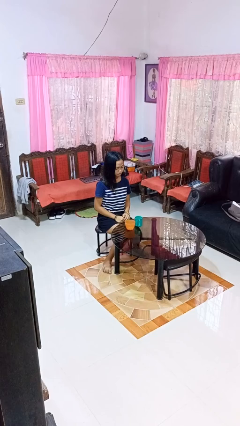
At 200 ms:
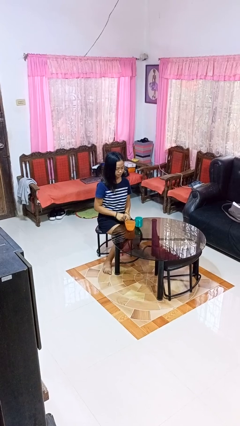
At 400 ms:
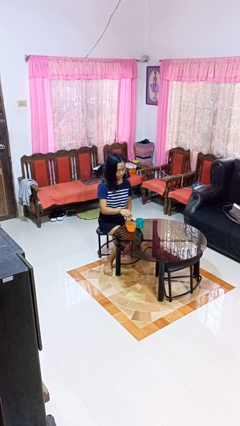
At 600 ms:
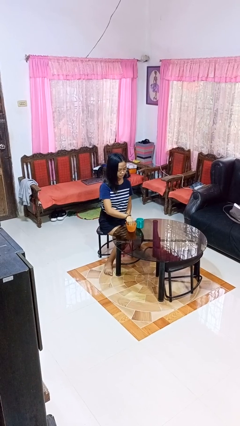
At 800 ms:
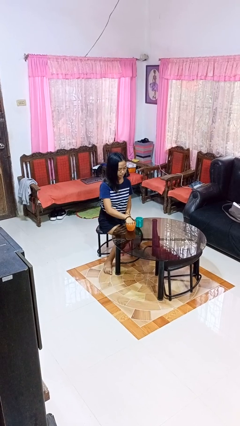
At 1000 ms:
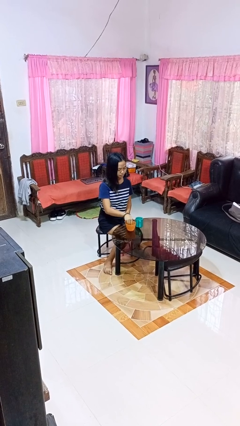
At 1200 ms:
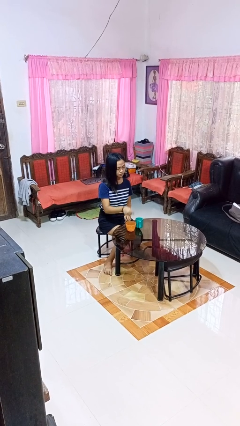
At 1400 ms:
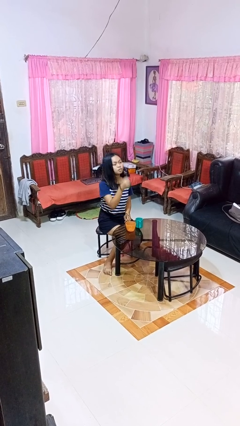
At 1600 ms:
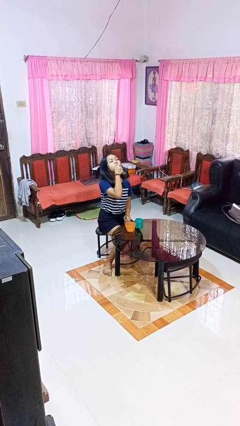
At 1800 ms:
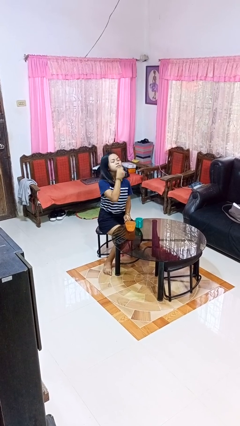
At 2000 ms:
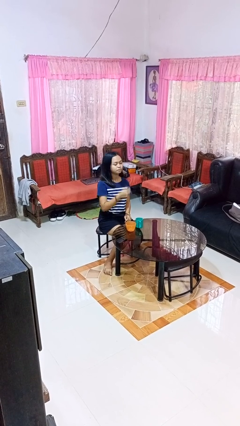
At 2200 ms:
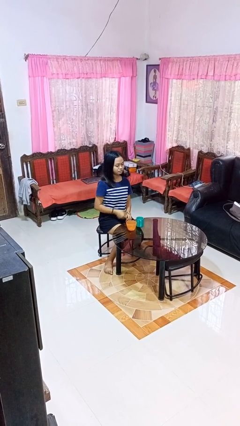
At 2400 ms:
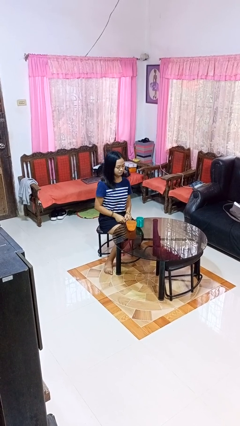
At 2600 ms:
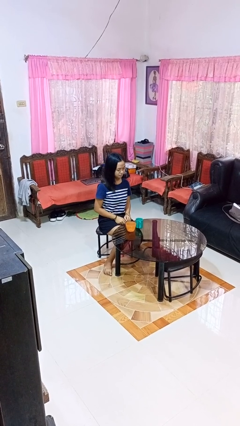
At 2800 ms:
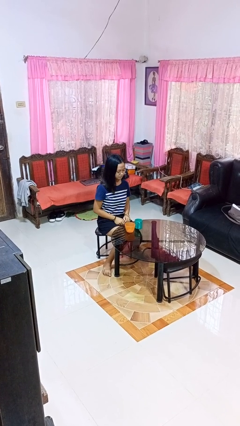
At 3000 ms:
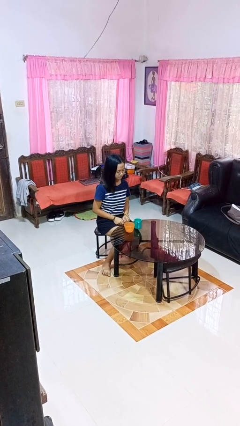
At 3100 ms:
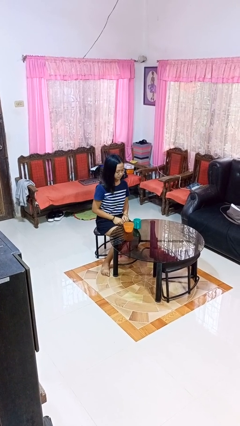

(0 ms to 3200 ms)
person takes medicine pills

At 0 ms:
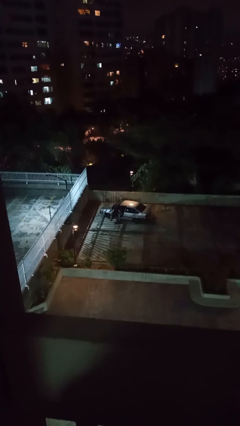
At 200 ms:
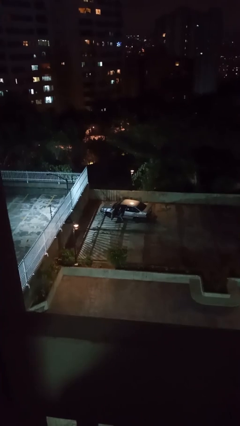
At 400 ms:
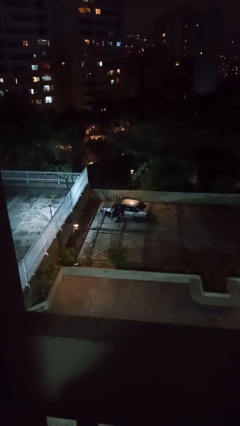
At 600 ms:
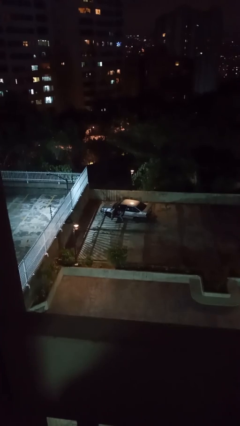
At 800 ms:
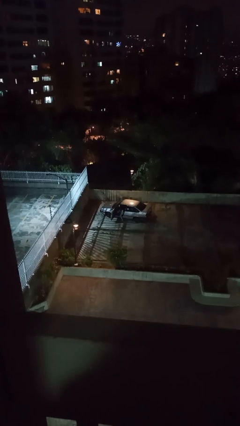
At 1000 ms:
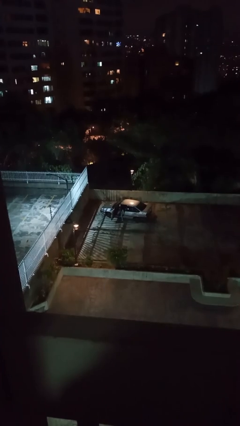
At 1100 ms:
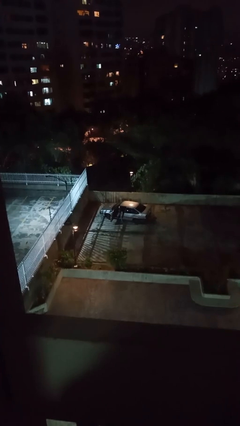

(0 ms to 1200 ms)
person exits car

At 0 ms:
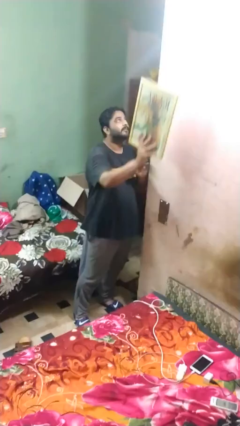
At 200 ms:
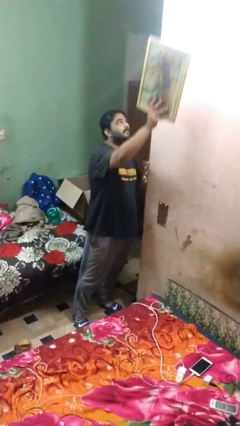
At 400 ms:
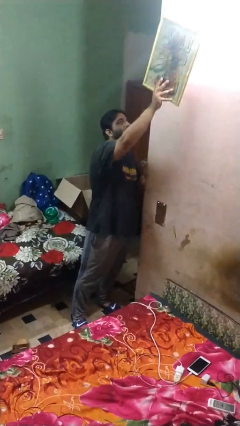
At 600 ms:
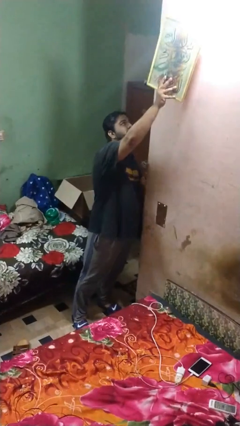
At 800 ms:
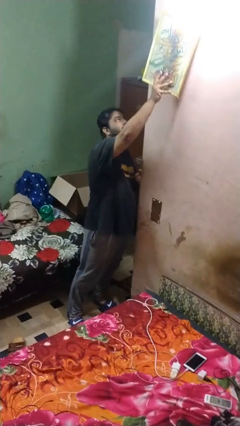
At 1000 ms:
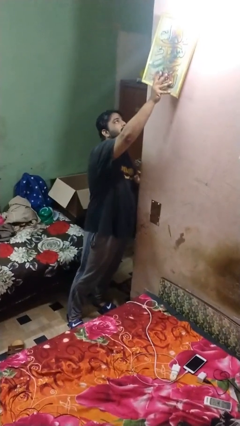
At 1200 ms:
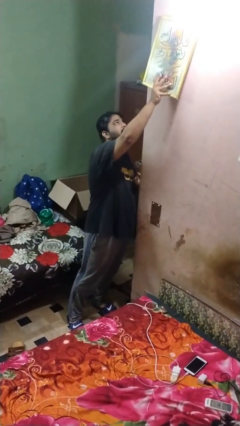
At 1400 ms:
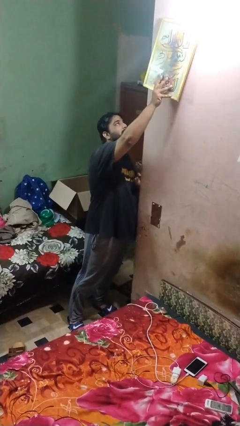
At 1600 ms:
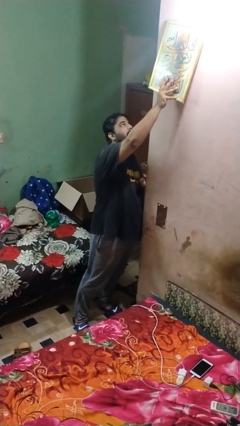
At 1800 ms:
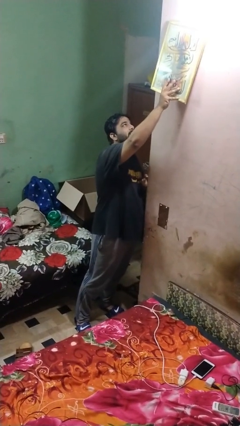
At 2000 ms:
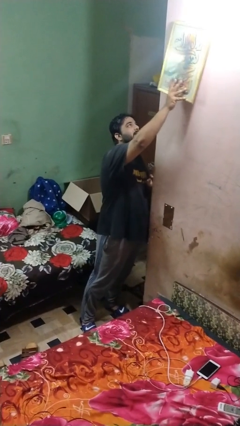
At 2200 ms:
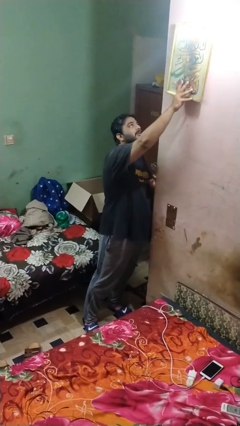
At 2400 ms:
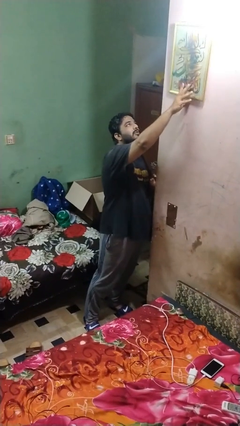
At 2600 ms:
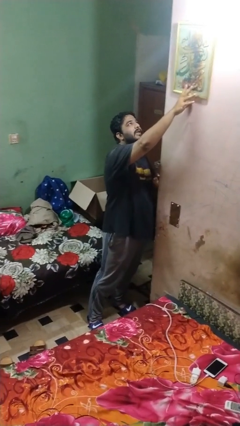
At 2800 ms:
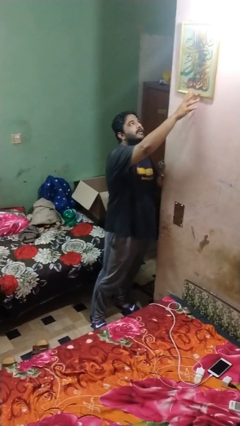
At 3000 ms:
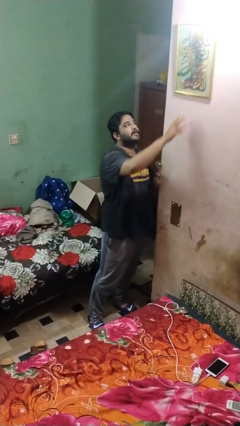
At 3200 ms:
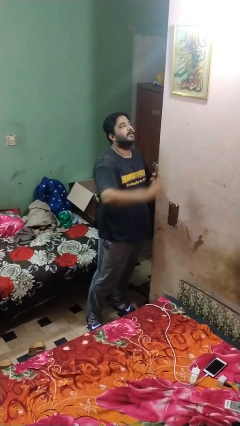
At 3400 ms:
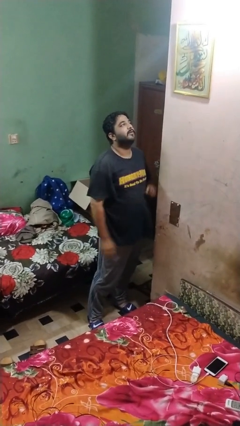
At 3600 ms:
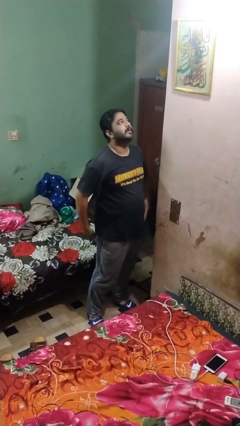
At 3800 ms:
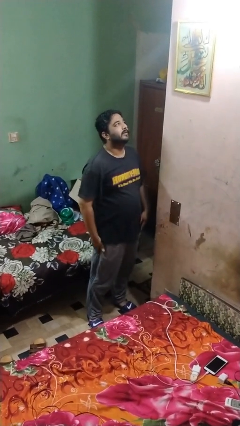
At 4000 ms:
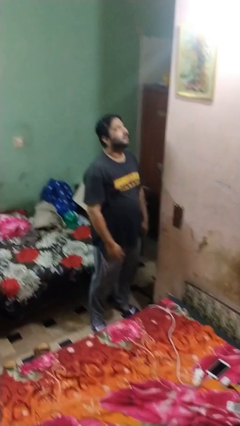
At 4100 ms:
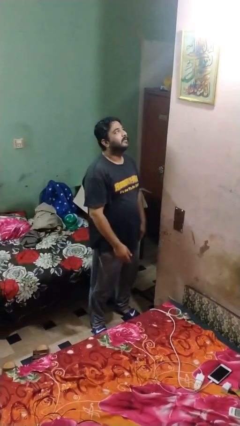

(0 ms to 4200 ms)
person searches under couch

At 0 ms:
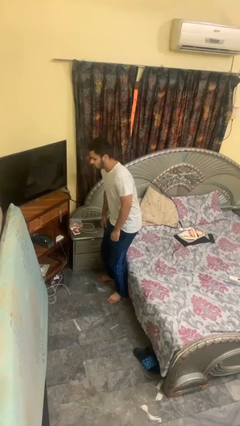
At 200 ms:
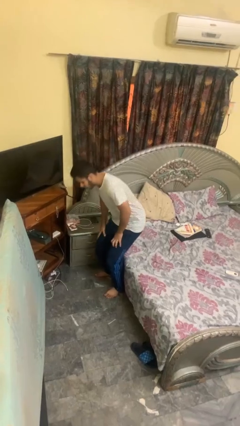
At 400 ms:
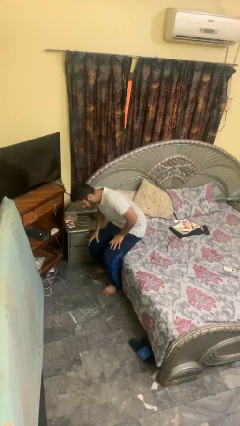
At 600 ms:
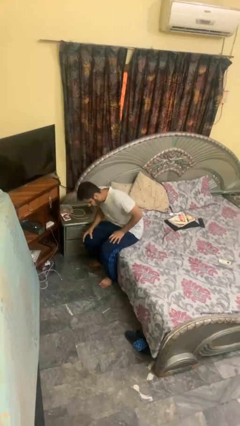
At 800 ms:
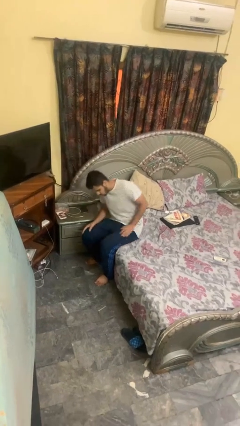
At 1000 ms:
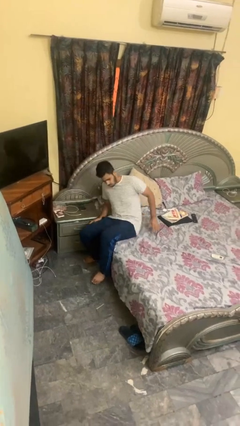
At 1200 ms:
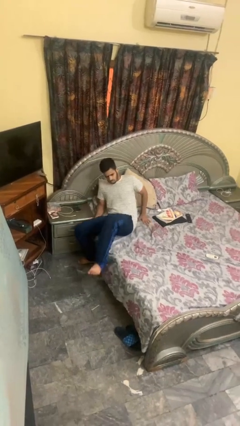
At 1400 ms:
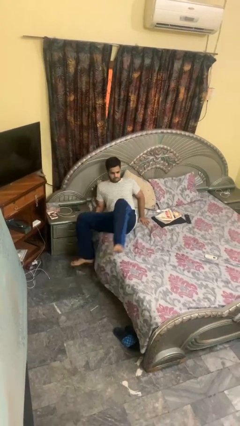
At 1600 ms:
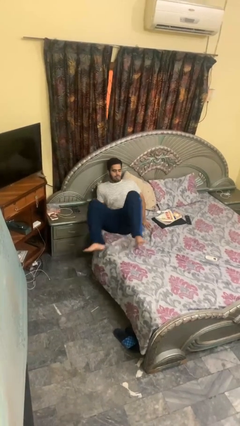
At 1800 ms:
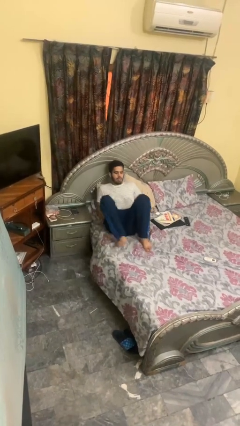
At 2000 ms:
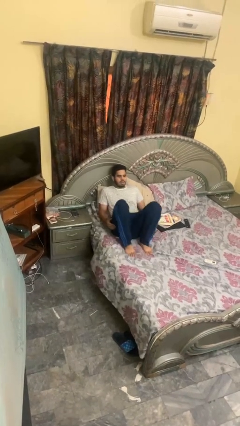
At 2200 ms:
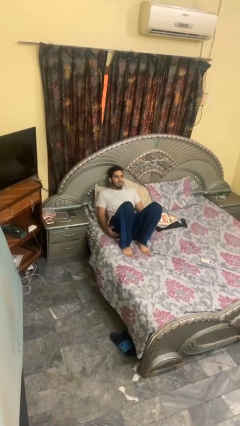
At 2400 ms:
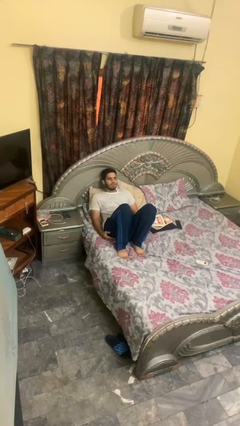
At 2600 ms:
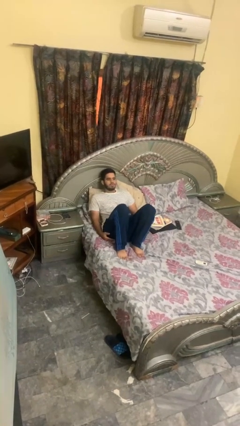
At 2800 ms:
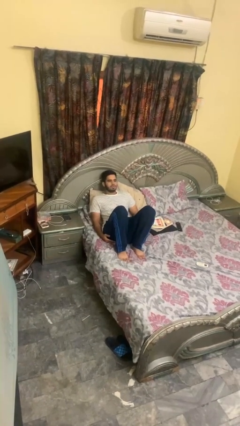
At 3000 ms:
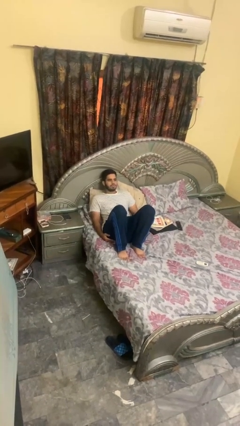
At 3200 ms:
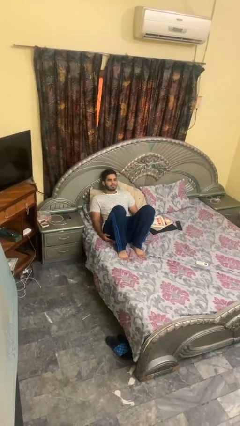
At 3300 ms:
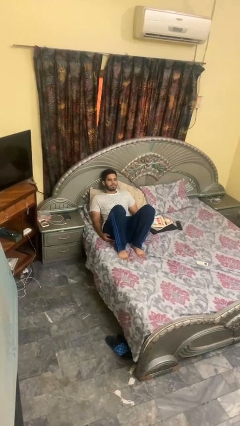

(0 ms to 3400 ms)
person lies down on bed

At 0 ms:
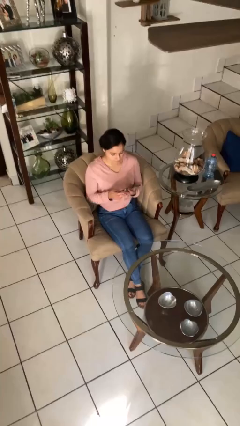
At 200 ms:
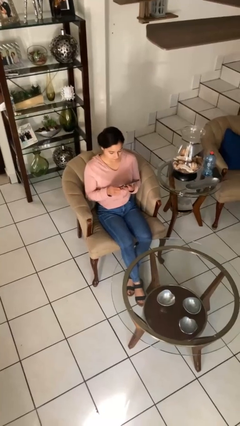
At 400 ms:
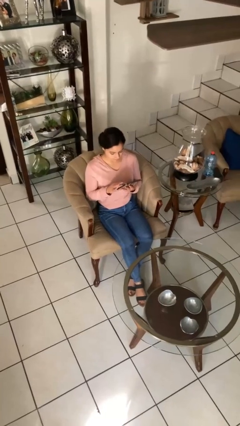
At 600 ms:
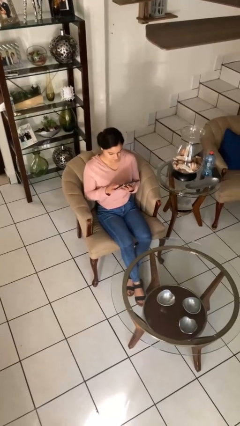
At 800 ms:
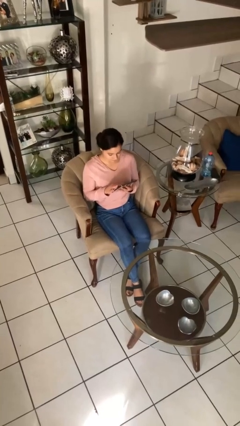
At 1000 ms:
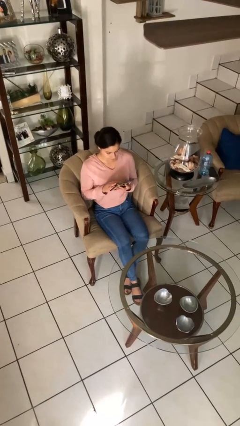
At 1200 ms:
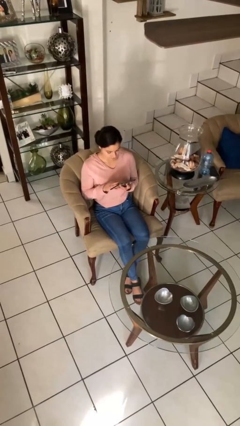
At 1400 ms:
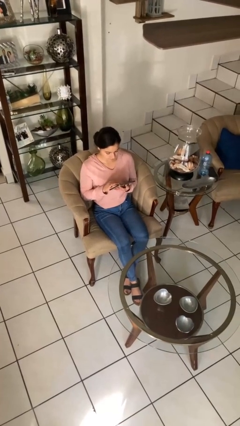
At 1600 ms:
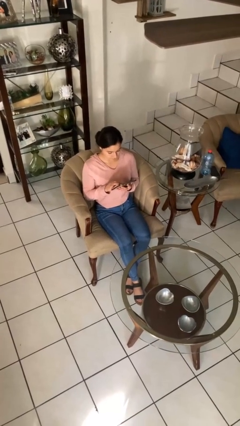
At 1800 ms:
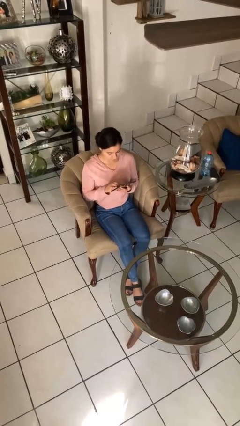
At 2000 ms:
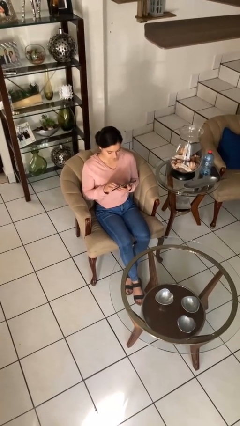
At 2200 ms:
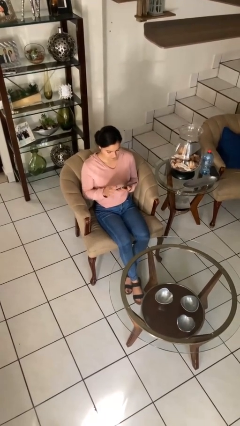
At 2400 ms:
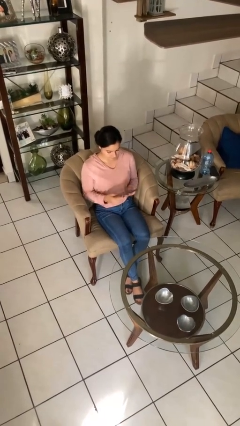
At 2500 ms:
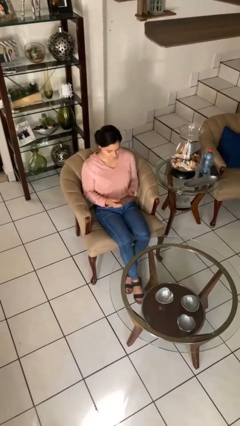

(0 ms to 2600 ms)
person interacts with tablet

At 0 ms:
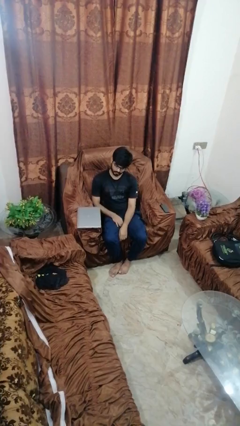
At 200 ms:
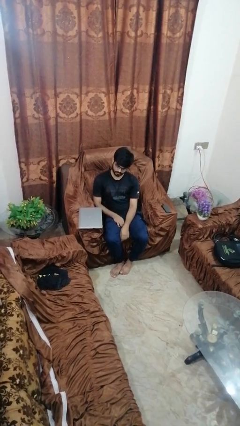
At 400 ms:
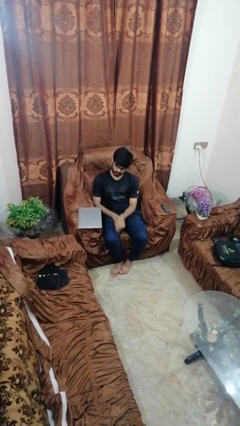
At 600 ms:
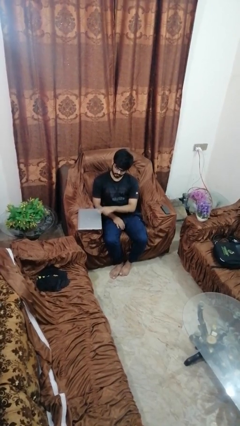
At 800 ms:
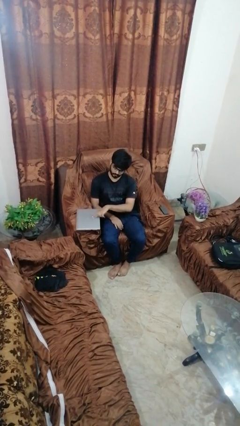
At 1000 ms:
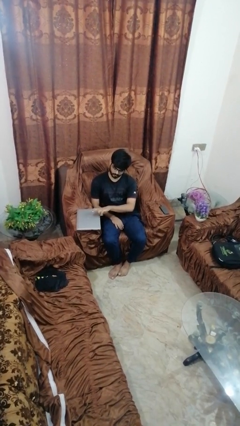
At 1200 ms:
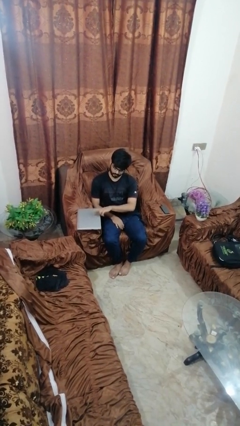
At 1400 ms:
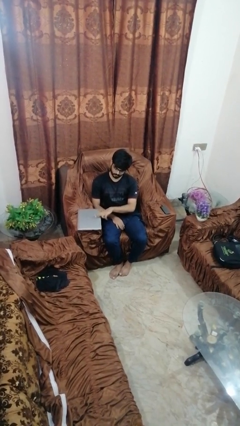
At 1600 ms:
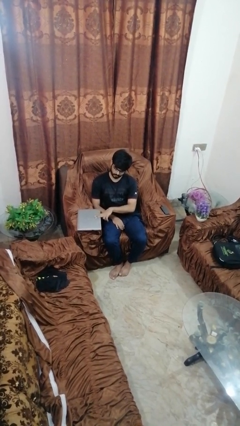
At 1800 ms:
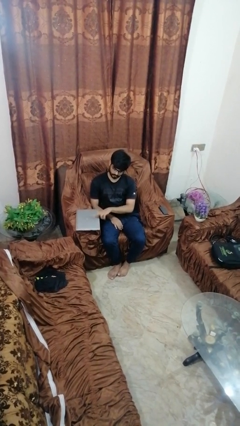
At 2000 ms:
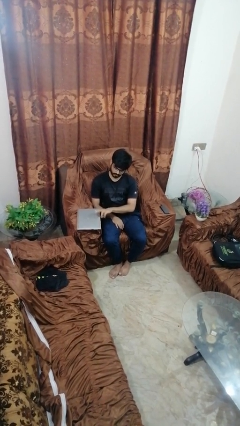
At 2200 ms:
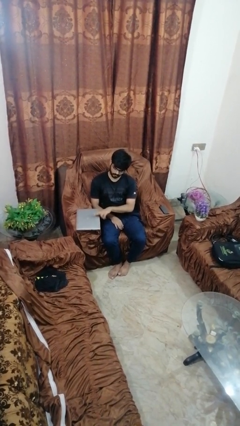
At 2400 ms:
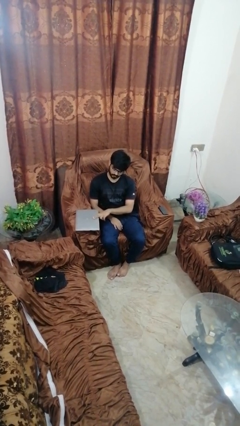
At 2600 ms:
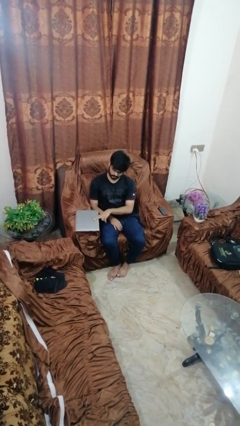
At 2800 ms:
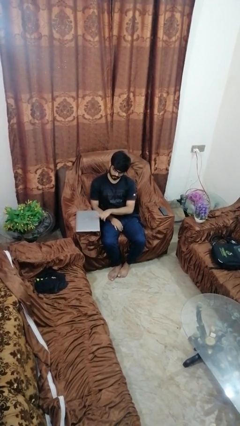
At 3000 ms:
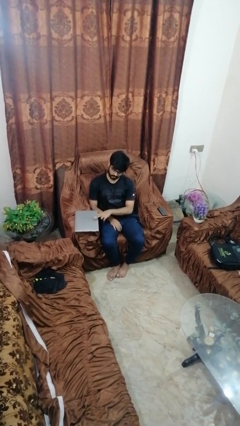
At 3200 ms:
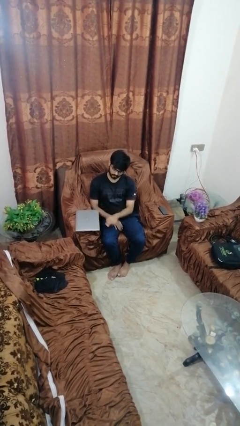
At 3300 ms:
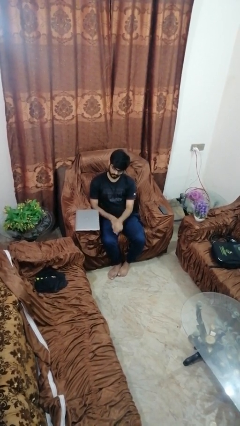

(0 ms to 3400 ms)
person taps object with finger
